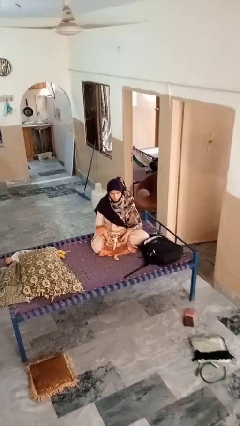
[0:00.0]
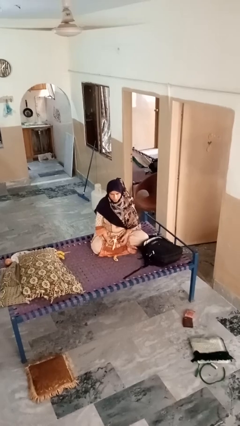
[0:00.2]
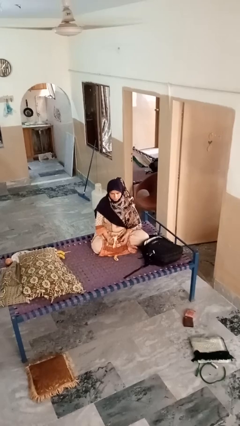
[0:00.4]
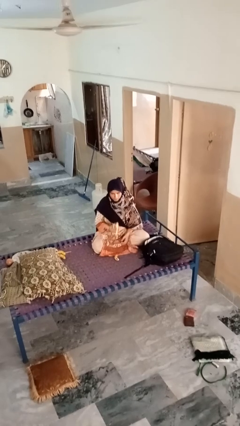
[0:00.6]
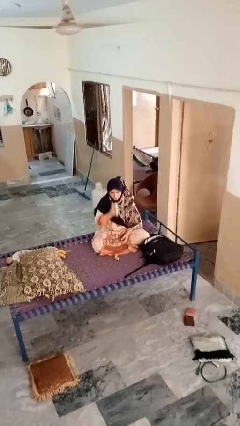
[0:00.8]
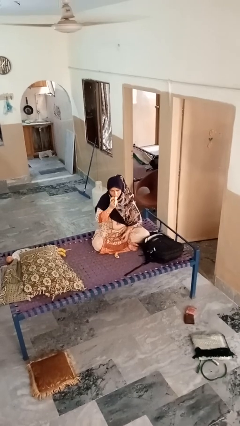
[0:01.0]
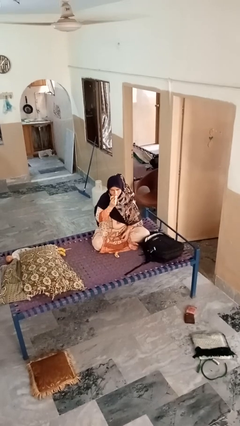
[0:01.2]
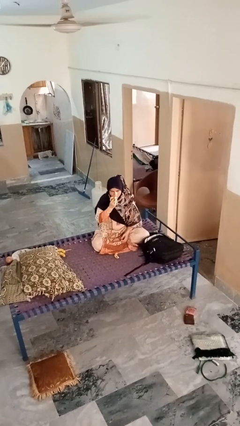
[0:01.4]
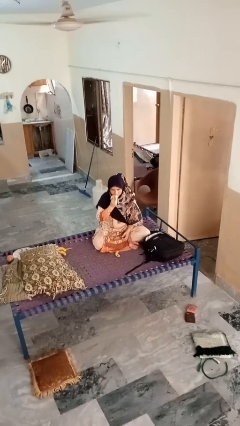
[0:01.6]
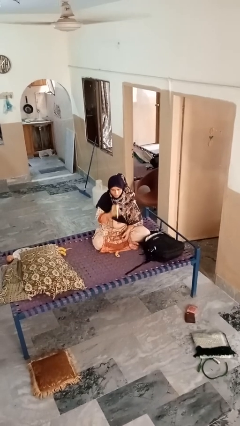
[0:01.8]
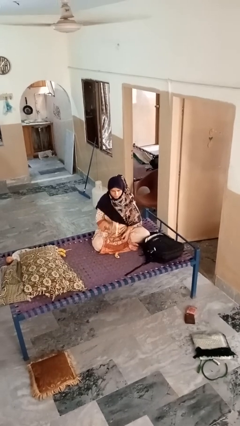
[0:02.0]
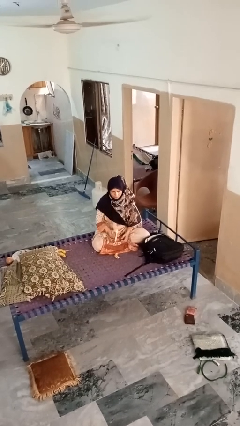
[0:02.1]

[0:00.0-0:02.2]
person eats banana

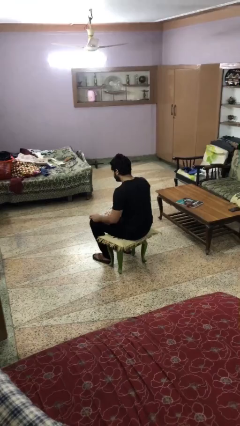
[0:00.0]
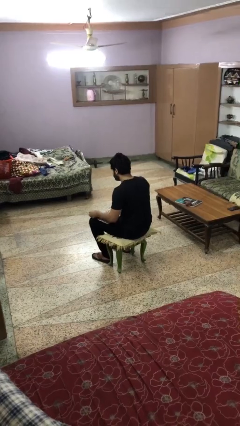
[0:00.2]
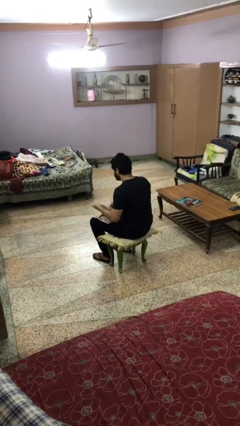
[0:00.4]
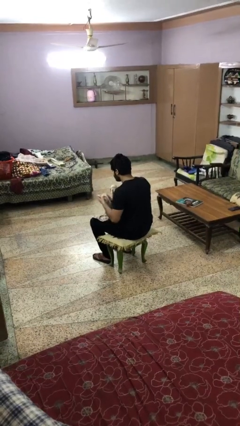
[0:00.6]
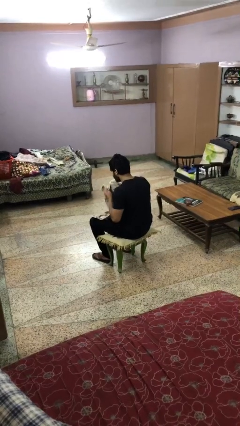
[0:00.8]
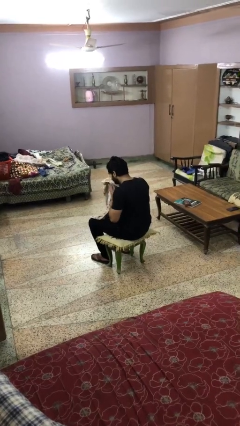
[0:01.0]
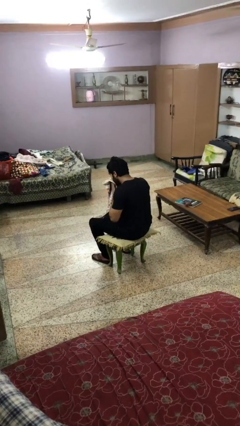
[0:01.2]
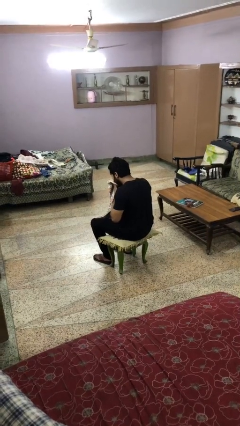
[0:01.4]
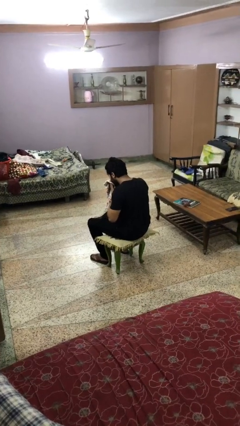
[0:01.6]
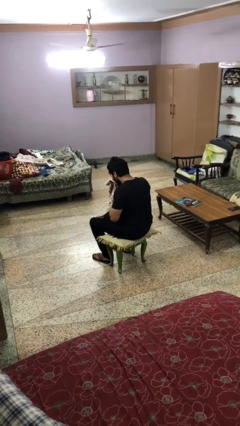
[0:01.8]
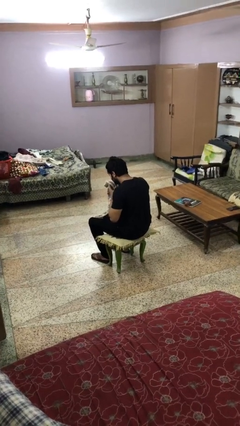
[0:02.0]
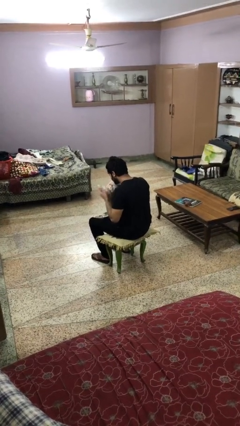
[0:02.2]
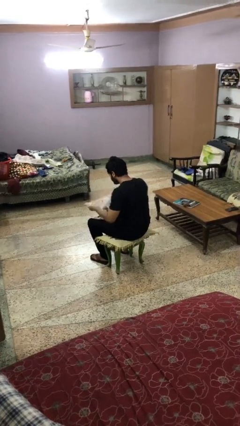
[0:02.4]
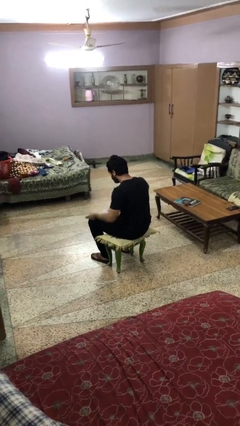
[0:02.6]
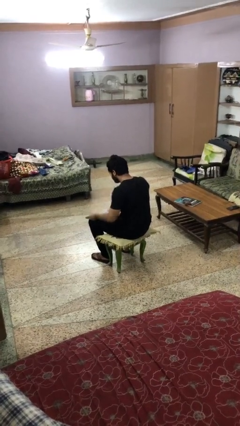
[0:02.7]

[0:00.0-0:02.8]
person wipes mouth with napkin

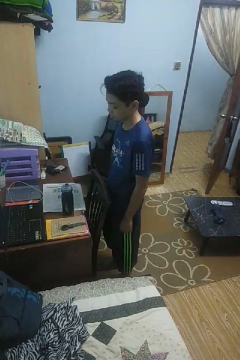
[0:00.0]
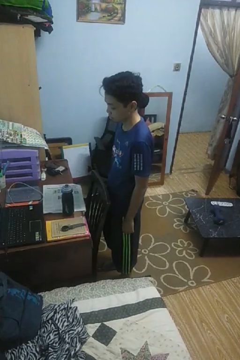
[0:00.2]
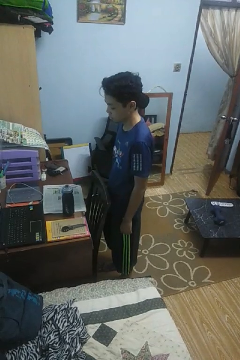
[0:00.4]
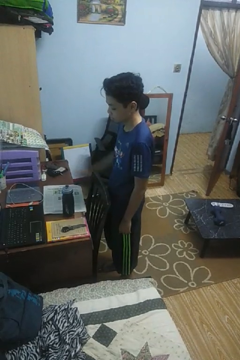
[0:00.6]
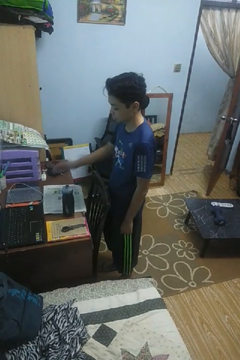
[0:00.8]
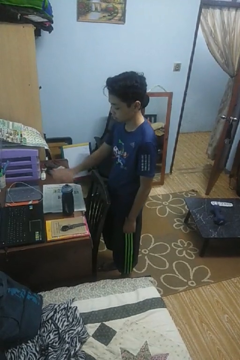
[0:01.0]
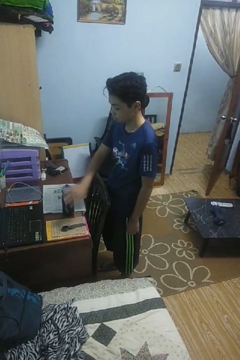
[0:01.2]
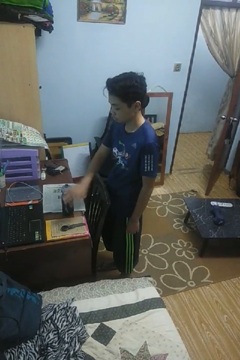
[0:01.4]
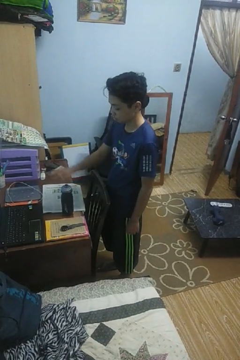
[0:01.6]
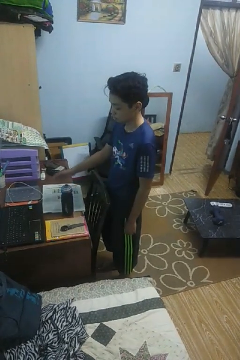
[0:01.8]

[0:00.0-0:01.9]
person waves hand over object

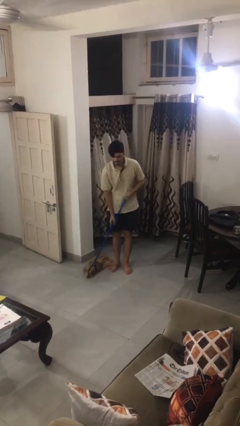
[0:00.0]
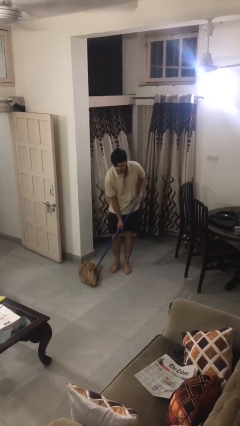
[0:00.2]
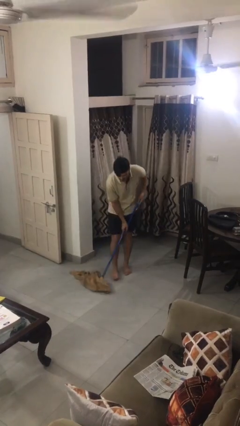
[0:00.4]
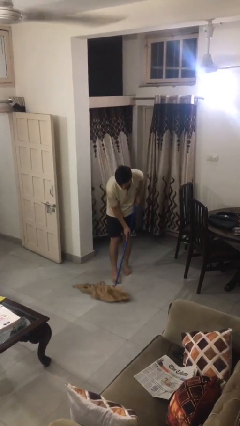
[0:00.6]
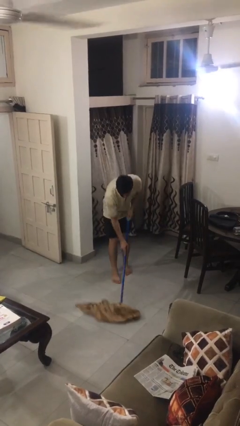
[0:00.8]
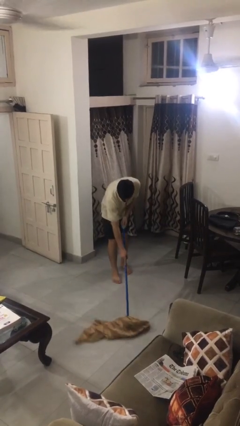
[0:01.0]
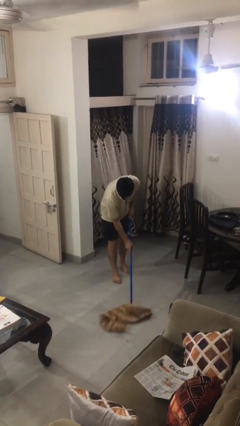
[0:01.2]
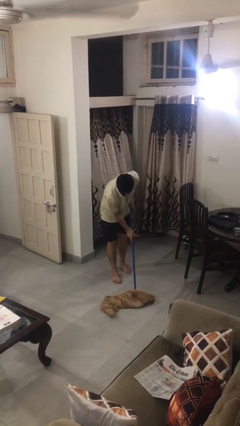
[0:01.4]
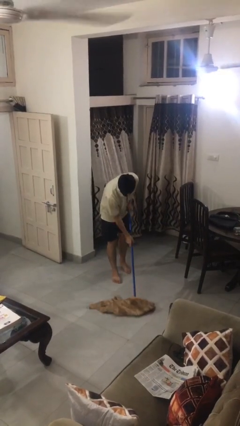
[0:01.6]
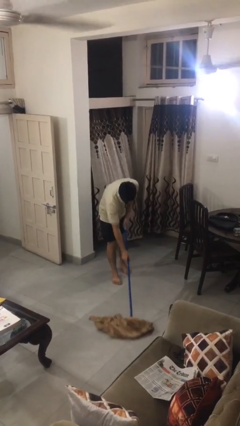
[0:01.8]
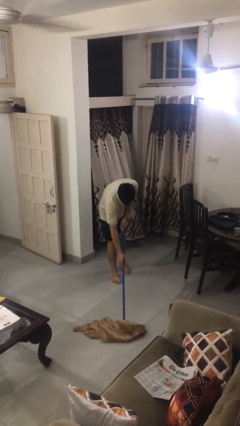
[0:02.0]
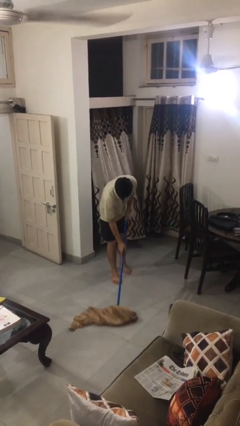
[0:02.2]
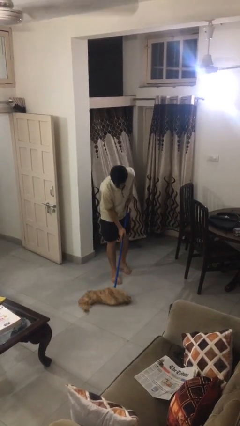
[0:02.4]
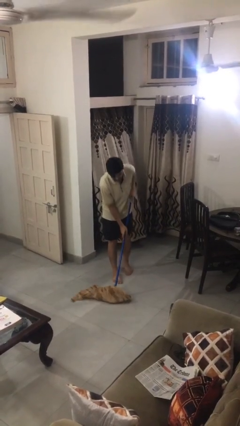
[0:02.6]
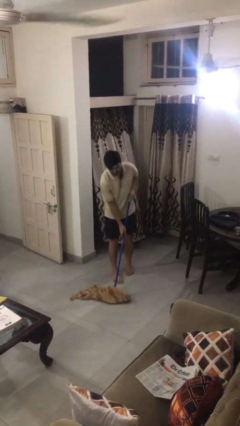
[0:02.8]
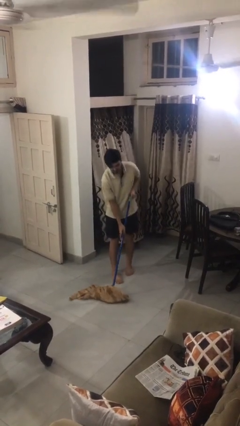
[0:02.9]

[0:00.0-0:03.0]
person mops

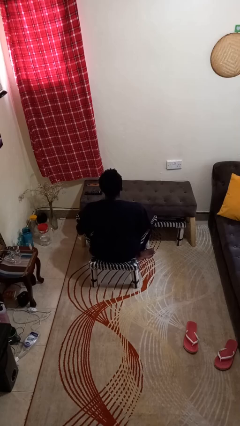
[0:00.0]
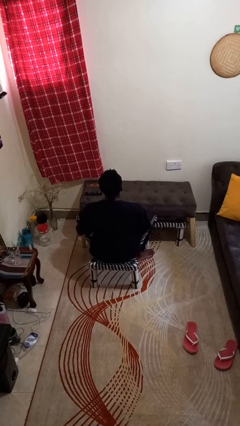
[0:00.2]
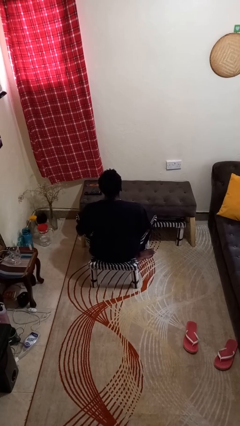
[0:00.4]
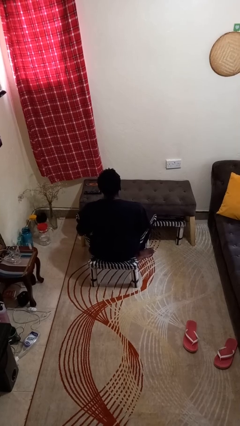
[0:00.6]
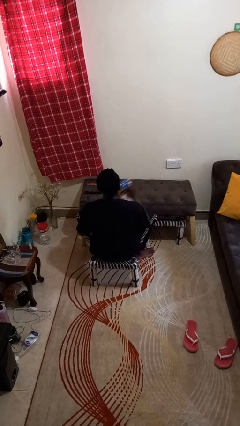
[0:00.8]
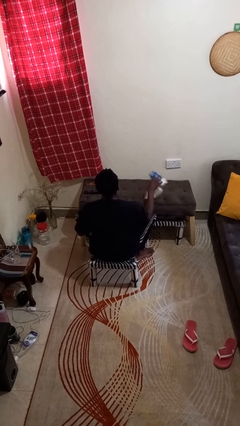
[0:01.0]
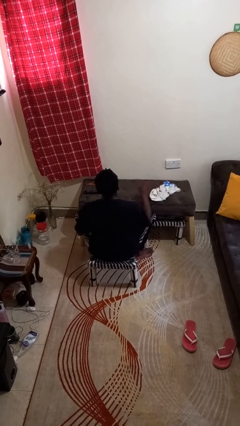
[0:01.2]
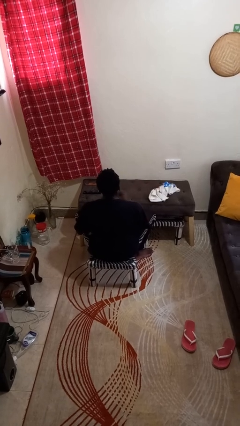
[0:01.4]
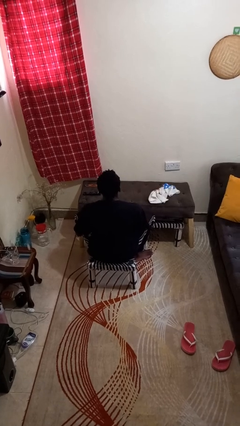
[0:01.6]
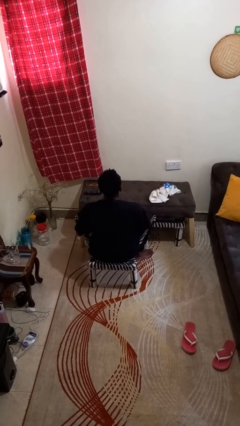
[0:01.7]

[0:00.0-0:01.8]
person throws object on table

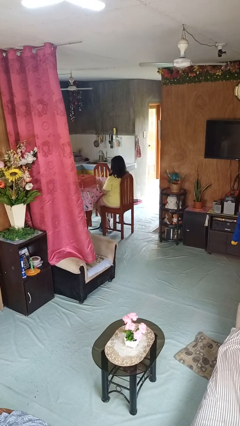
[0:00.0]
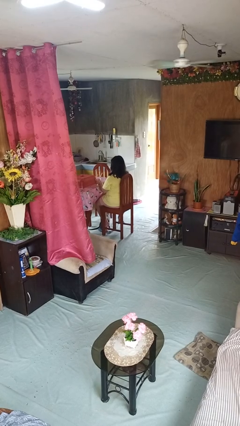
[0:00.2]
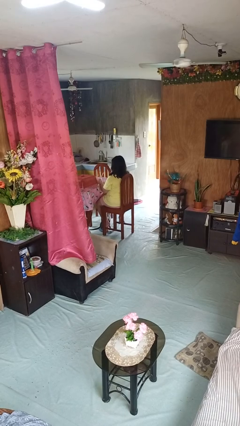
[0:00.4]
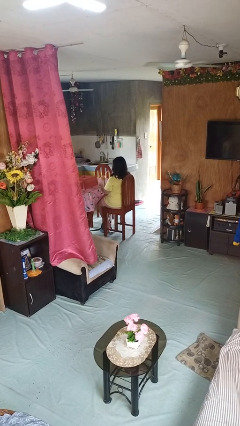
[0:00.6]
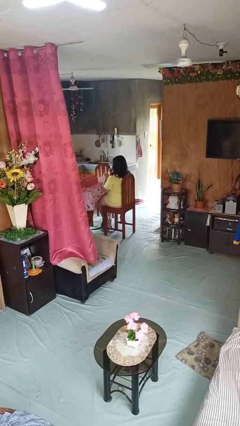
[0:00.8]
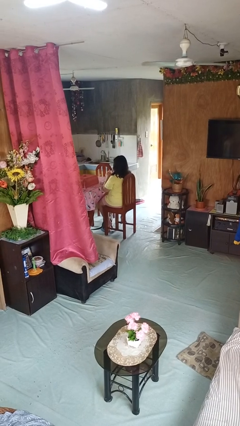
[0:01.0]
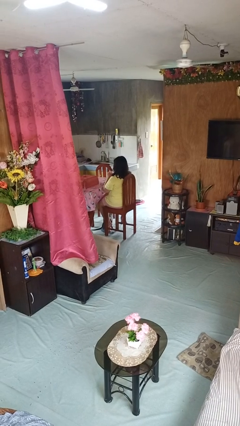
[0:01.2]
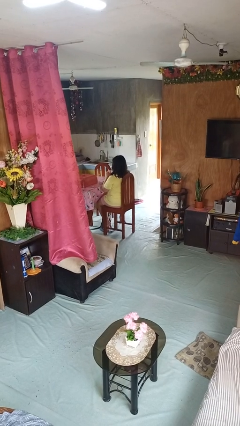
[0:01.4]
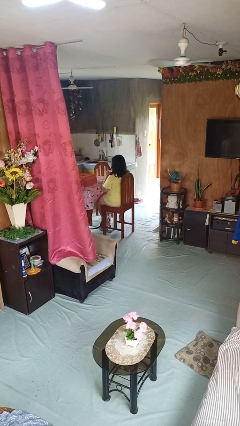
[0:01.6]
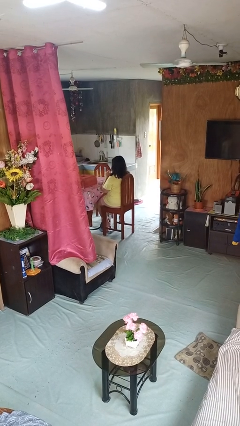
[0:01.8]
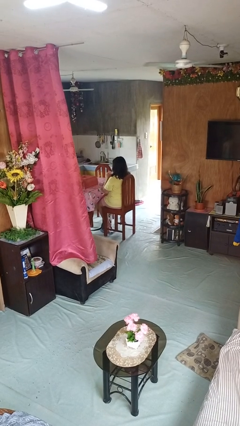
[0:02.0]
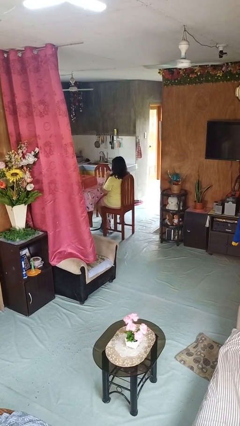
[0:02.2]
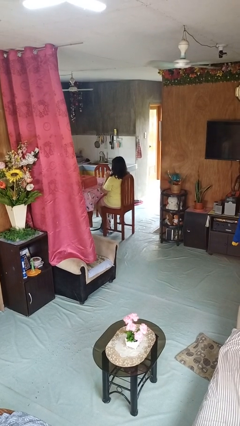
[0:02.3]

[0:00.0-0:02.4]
person drinks from straw

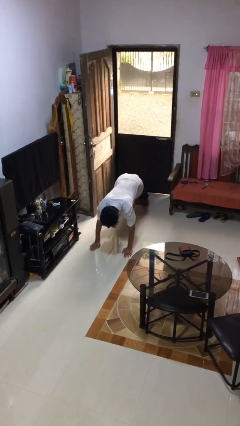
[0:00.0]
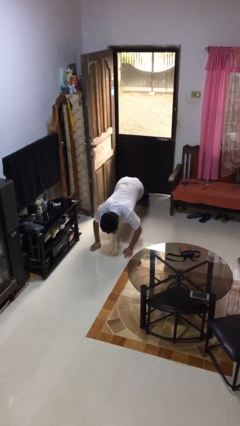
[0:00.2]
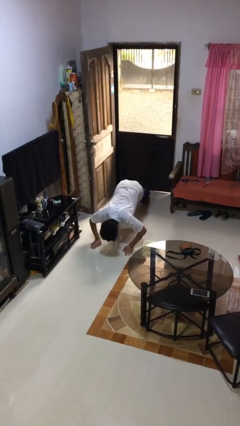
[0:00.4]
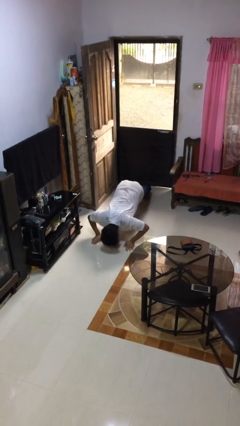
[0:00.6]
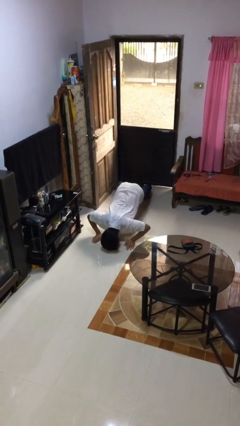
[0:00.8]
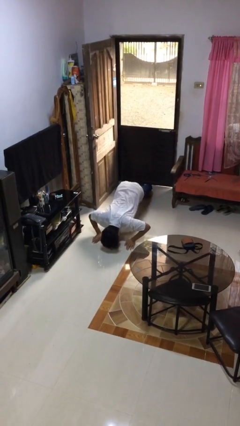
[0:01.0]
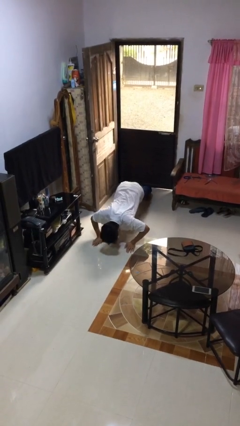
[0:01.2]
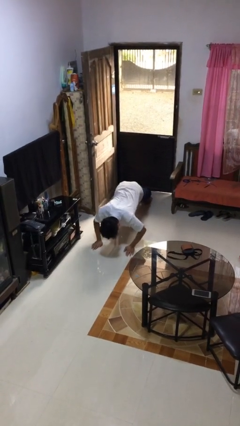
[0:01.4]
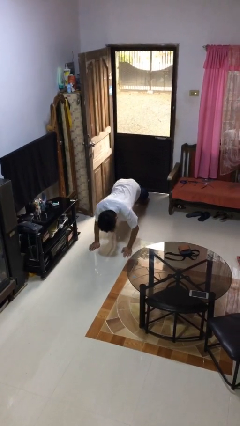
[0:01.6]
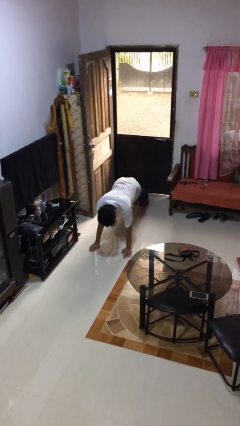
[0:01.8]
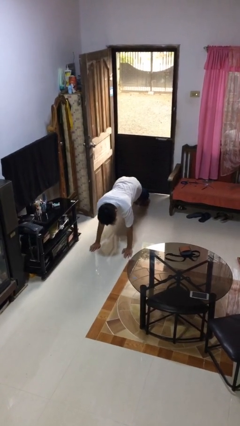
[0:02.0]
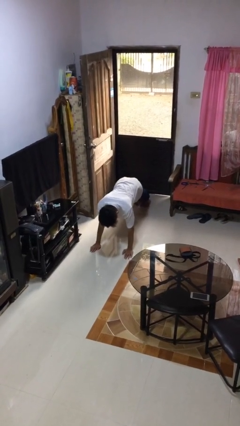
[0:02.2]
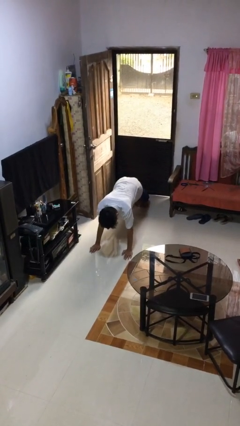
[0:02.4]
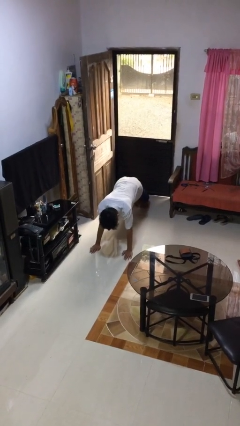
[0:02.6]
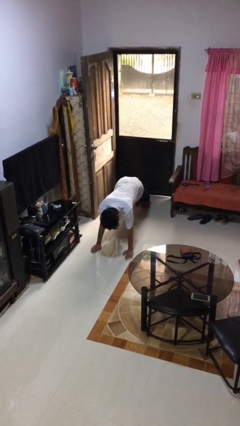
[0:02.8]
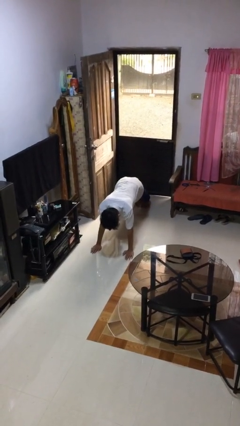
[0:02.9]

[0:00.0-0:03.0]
person exercises with pushup

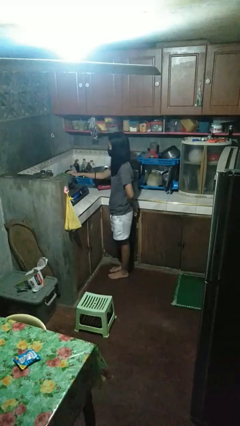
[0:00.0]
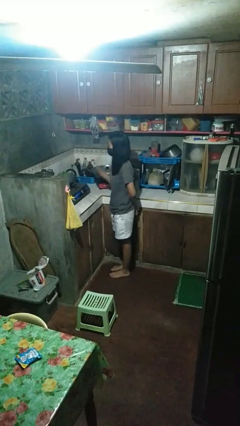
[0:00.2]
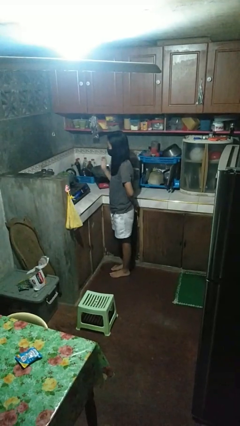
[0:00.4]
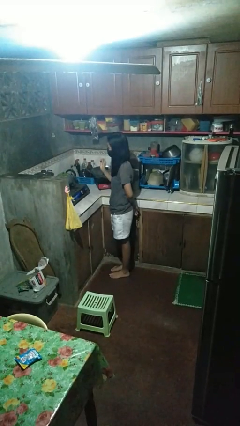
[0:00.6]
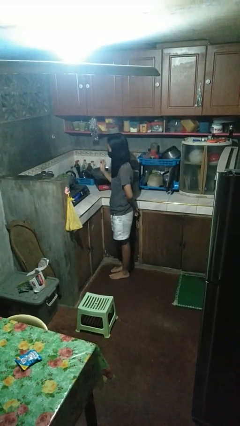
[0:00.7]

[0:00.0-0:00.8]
person burns hand
